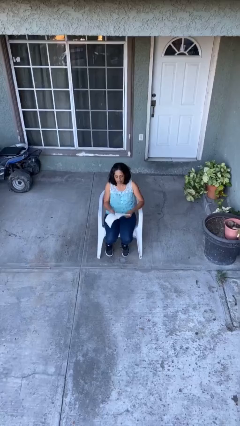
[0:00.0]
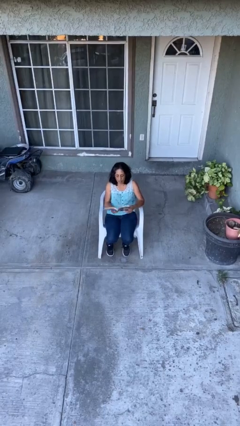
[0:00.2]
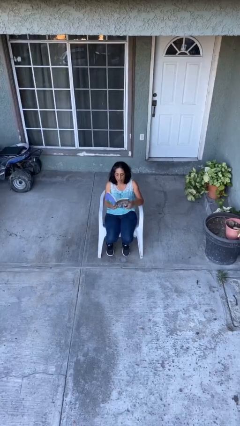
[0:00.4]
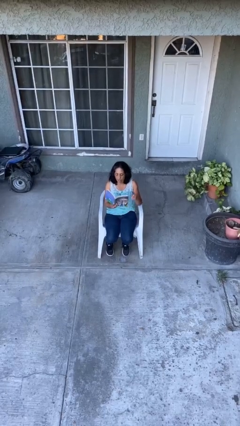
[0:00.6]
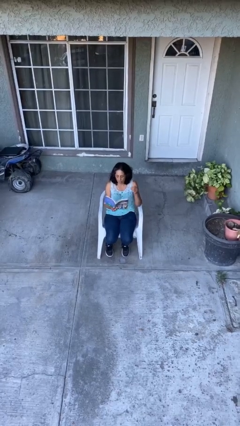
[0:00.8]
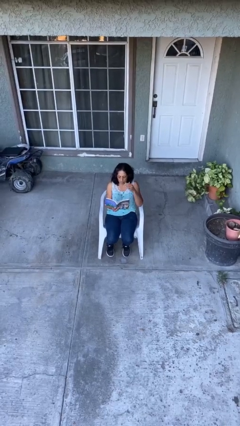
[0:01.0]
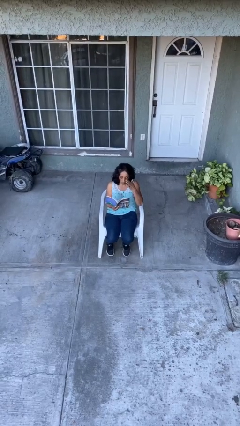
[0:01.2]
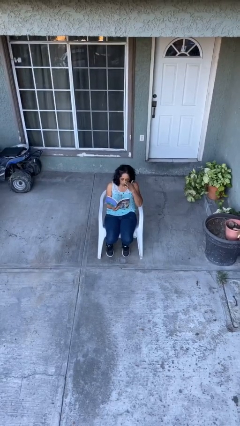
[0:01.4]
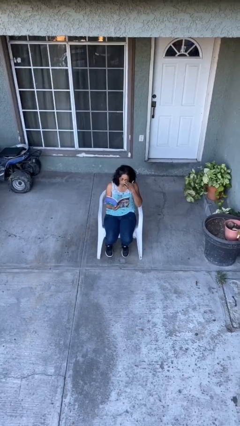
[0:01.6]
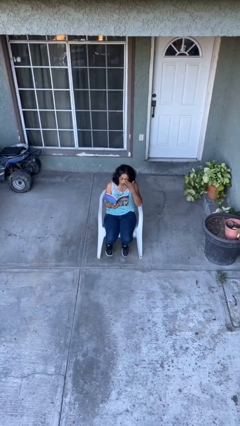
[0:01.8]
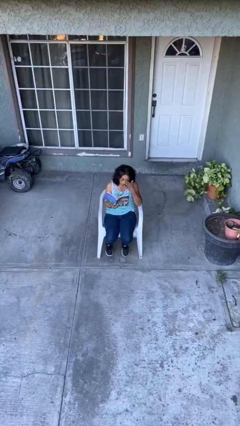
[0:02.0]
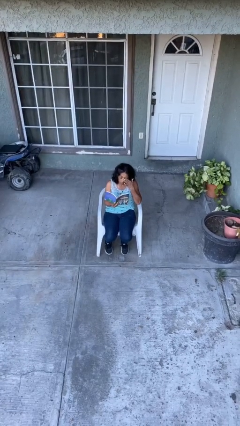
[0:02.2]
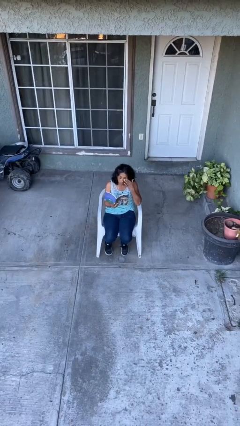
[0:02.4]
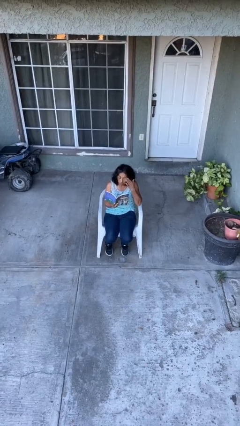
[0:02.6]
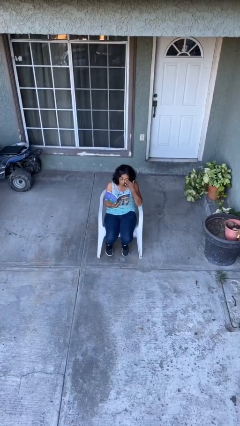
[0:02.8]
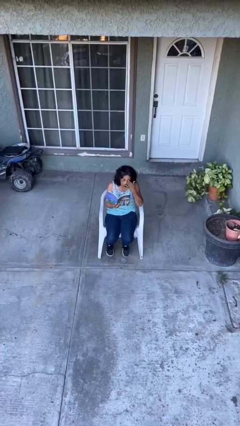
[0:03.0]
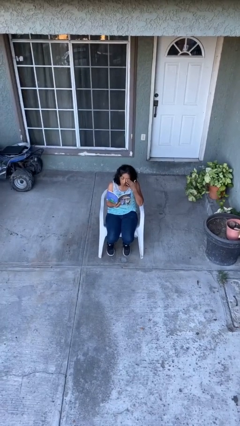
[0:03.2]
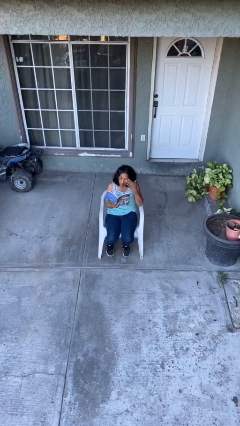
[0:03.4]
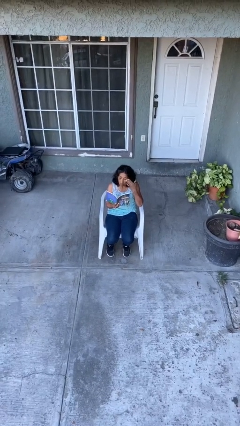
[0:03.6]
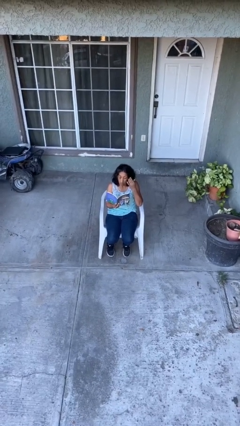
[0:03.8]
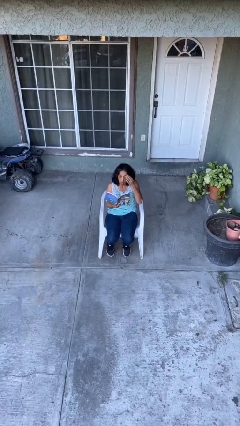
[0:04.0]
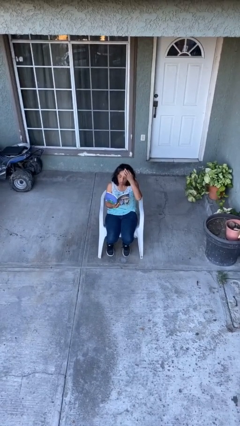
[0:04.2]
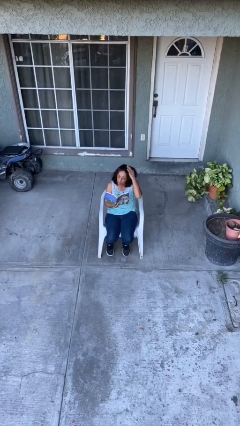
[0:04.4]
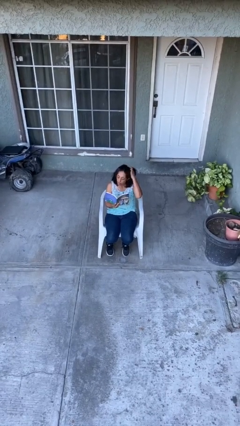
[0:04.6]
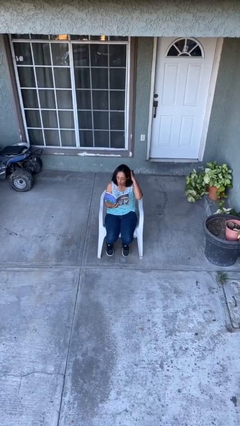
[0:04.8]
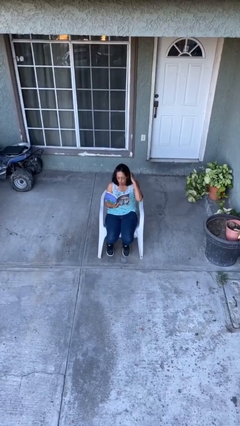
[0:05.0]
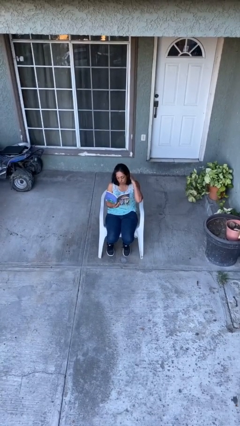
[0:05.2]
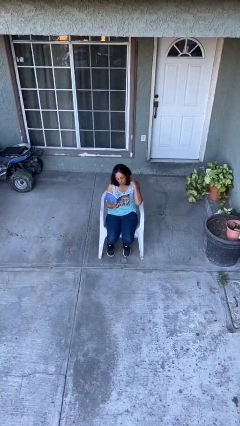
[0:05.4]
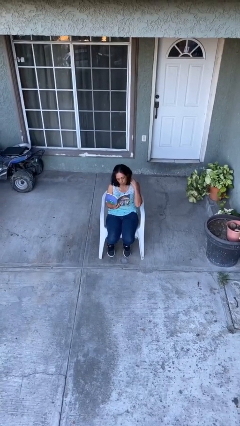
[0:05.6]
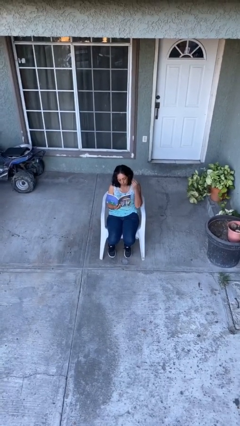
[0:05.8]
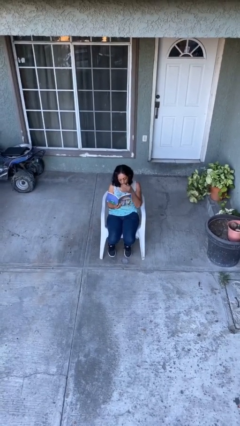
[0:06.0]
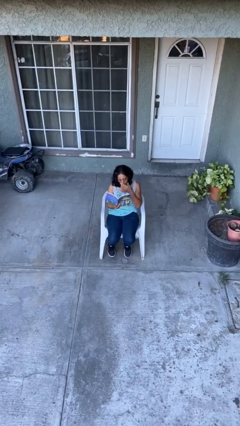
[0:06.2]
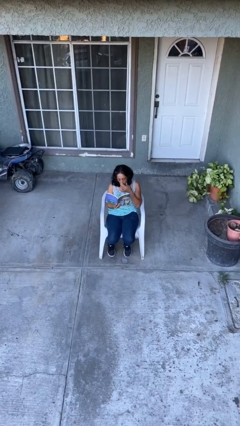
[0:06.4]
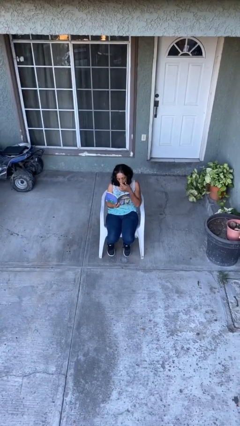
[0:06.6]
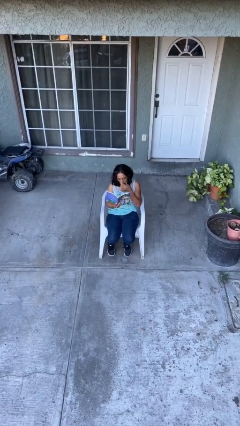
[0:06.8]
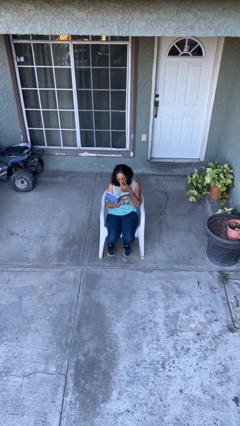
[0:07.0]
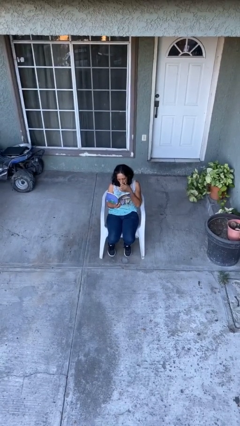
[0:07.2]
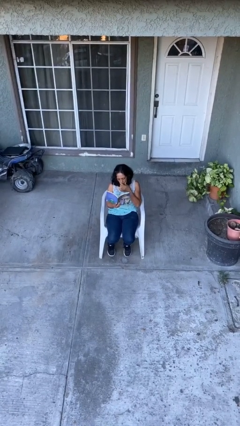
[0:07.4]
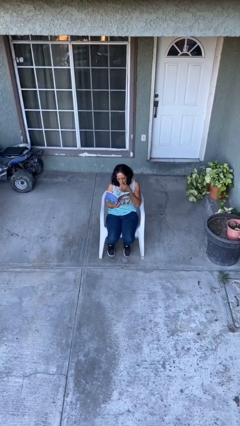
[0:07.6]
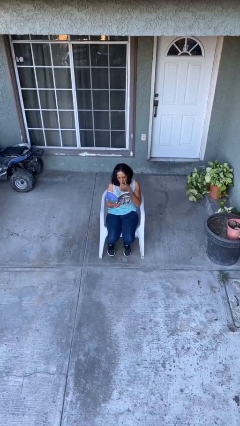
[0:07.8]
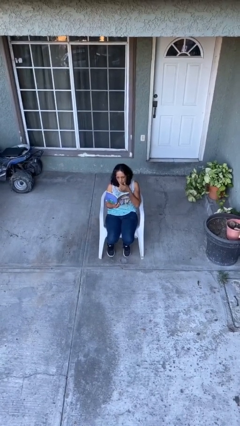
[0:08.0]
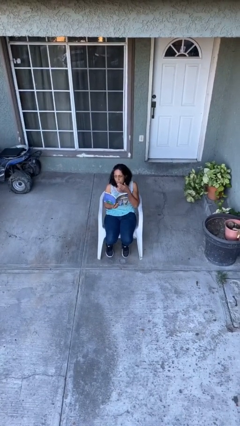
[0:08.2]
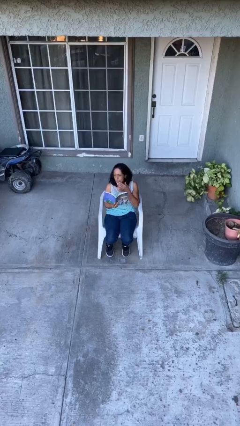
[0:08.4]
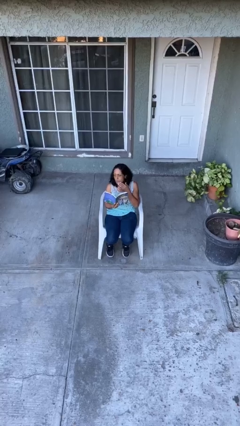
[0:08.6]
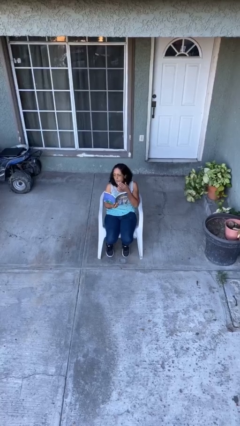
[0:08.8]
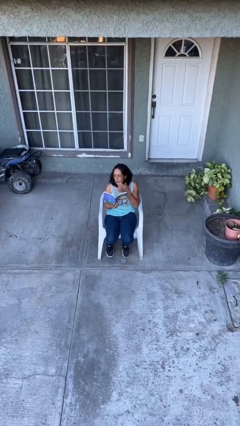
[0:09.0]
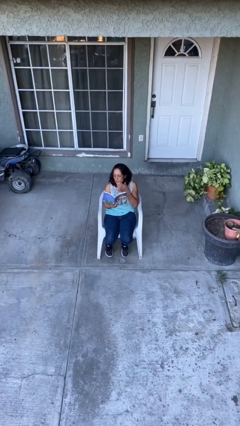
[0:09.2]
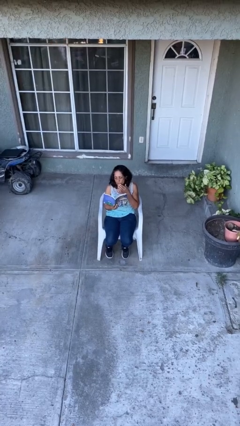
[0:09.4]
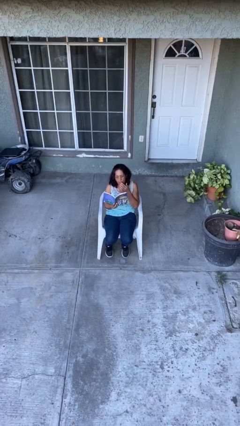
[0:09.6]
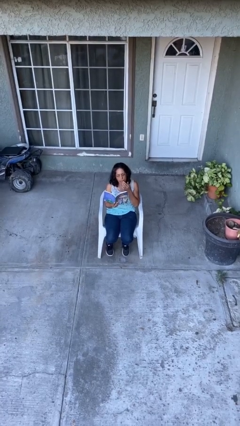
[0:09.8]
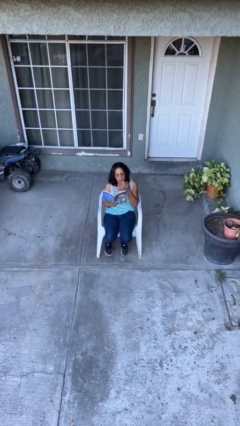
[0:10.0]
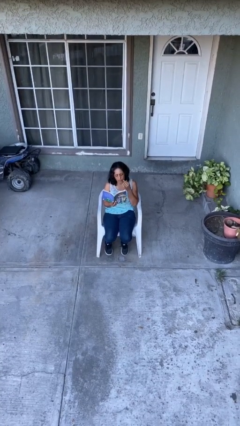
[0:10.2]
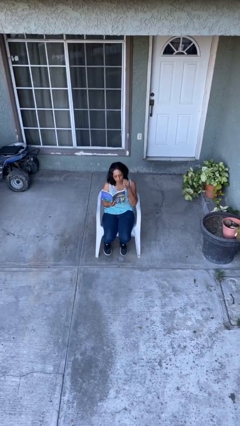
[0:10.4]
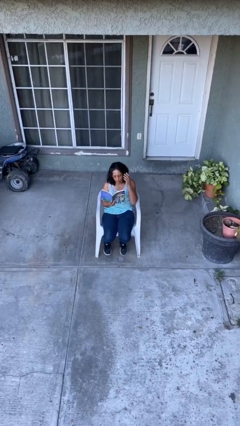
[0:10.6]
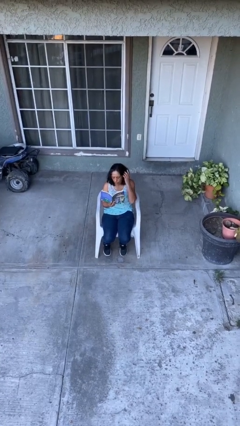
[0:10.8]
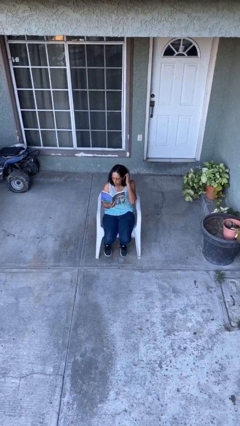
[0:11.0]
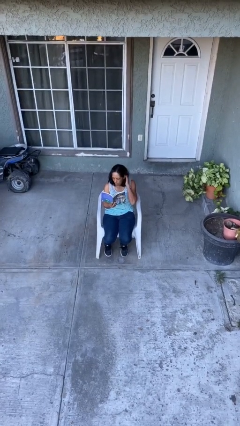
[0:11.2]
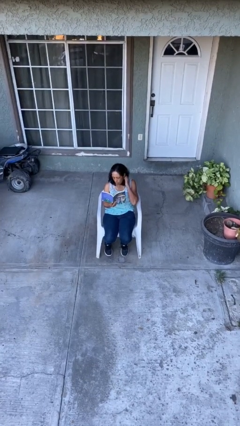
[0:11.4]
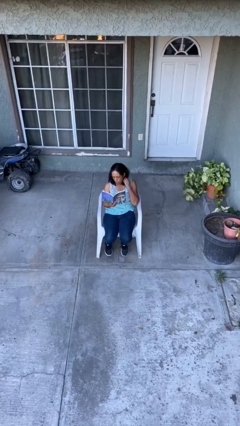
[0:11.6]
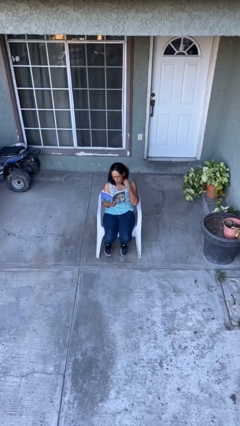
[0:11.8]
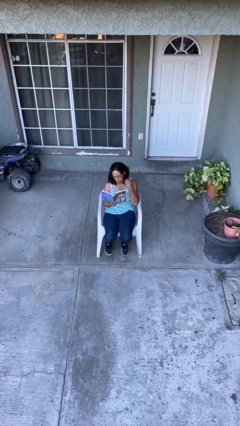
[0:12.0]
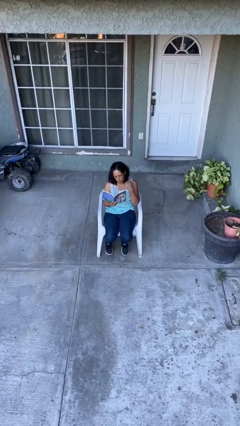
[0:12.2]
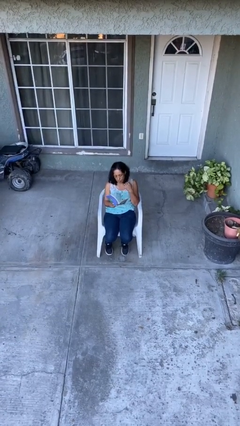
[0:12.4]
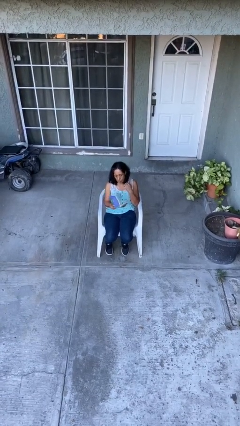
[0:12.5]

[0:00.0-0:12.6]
person reads document

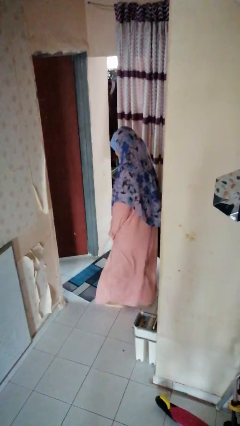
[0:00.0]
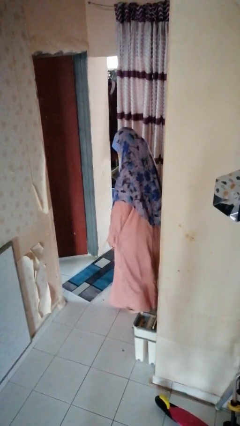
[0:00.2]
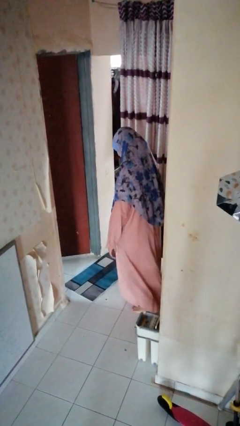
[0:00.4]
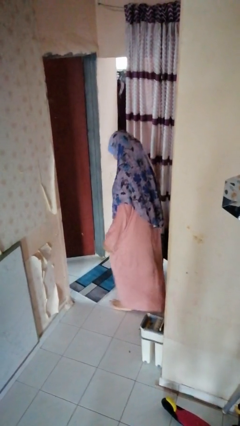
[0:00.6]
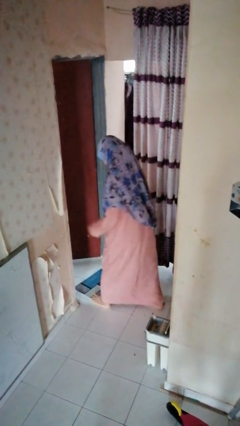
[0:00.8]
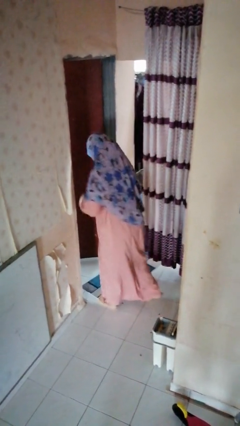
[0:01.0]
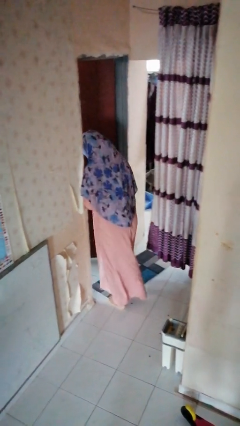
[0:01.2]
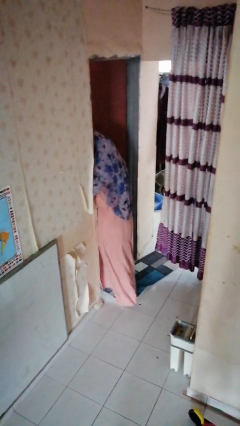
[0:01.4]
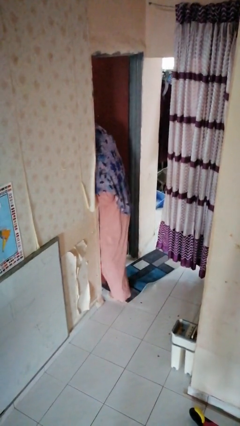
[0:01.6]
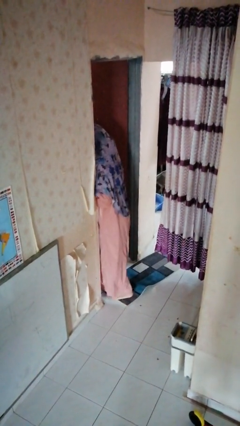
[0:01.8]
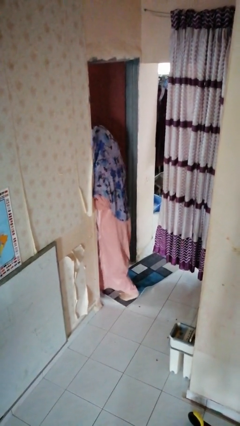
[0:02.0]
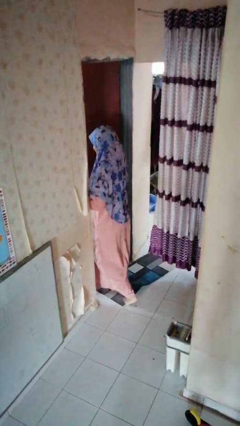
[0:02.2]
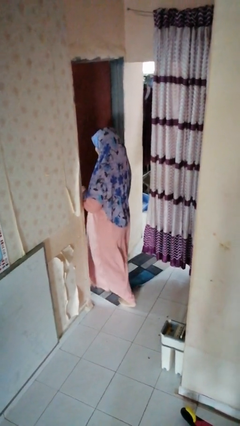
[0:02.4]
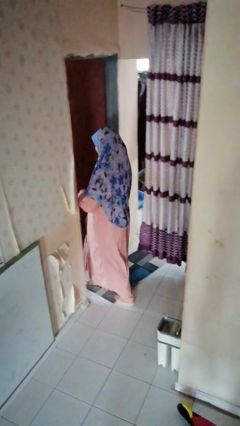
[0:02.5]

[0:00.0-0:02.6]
person bumps into wall

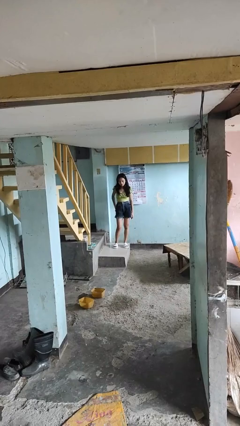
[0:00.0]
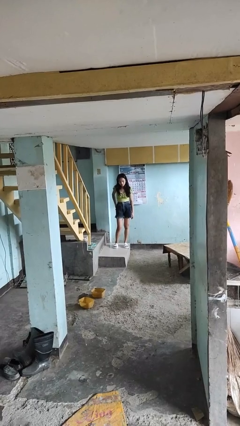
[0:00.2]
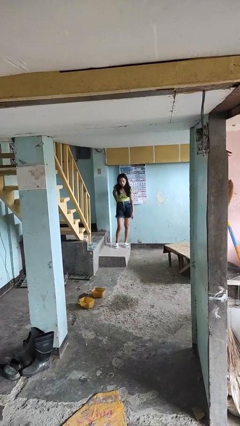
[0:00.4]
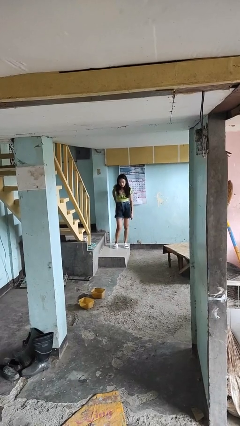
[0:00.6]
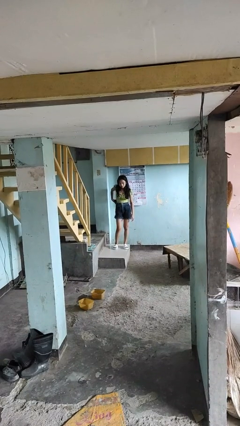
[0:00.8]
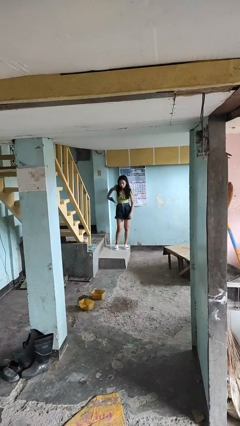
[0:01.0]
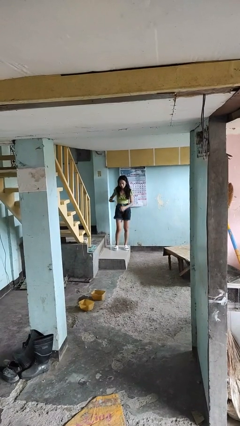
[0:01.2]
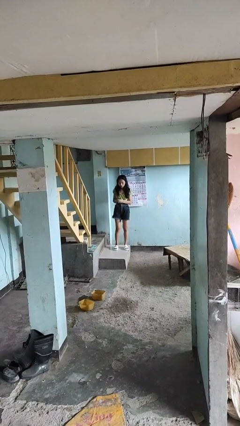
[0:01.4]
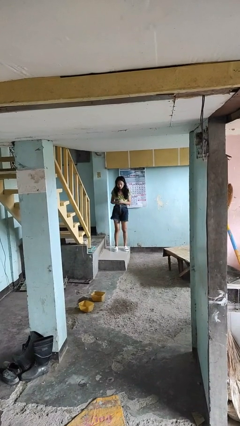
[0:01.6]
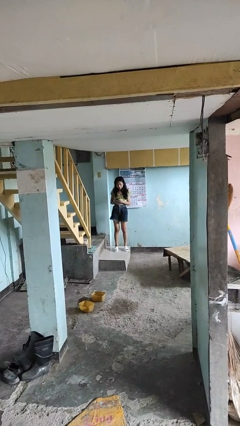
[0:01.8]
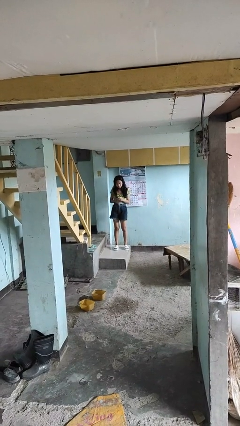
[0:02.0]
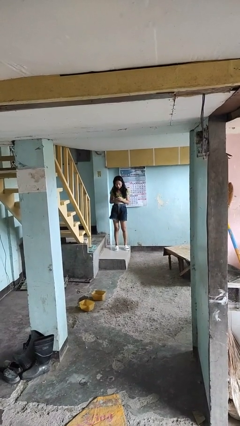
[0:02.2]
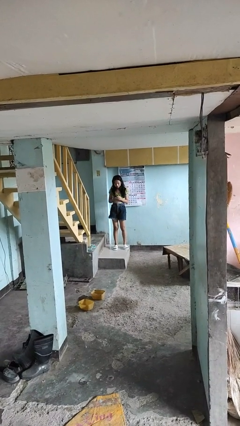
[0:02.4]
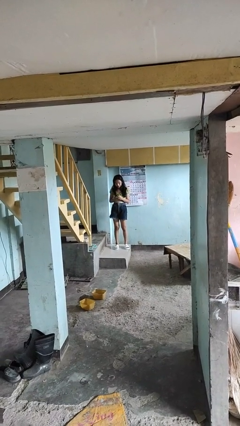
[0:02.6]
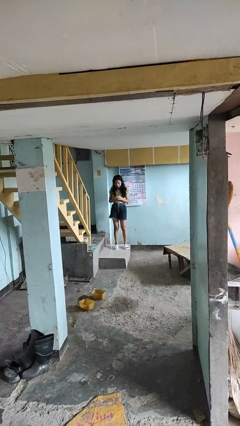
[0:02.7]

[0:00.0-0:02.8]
person takes phone from pocket
